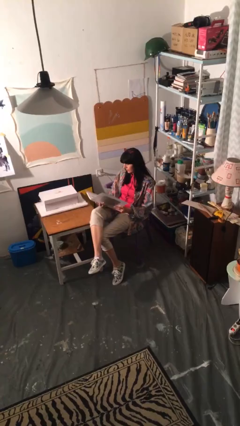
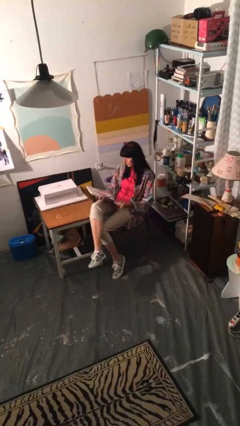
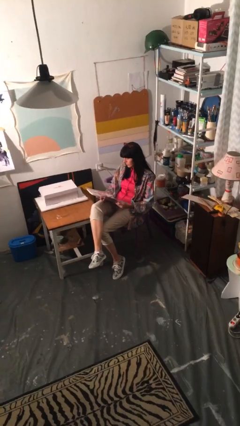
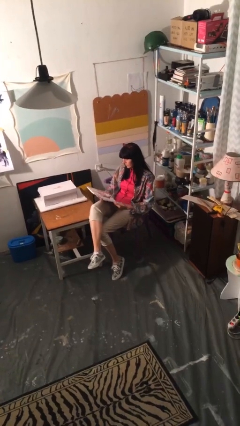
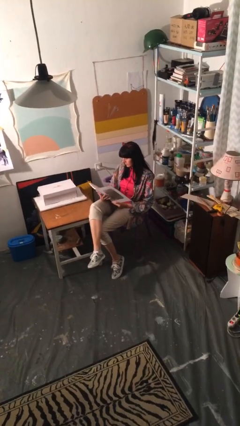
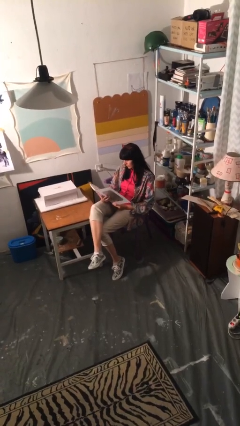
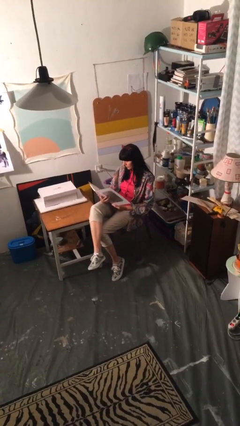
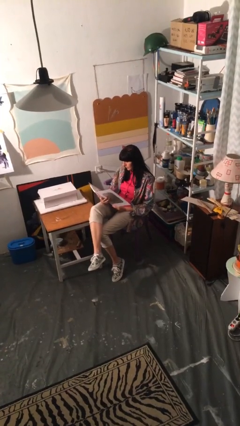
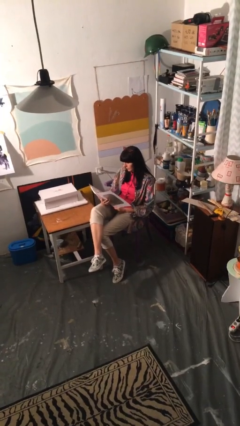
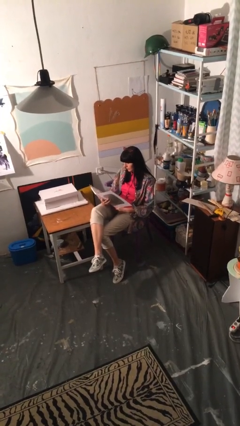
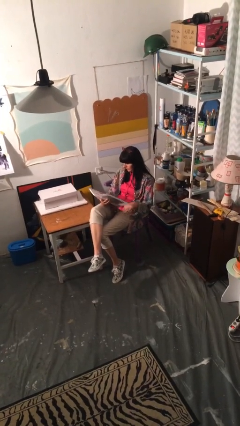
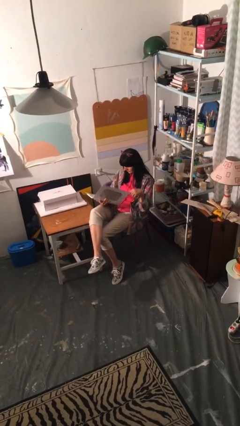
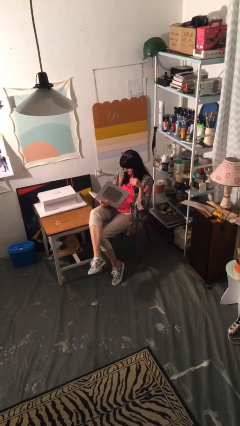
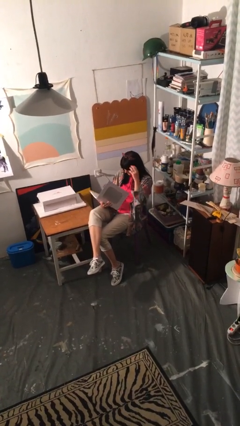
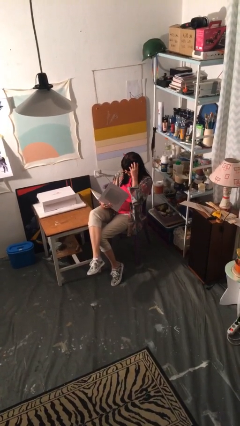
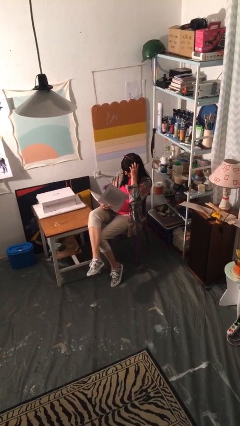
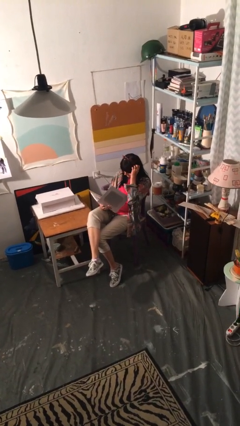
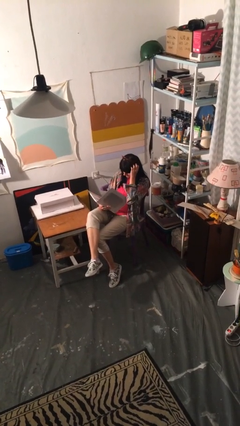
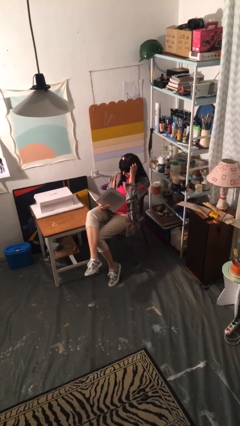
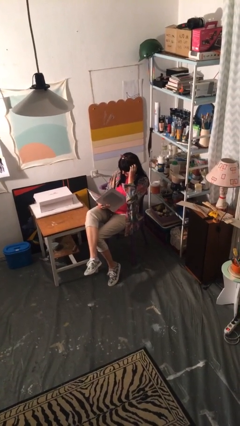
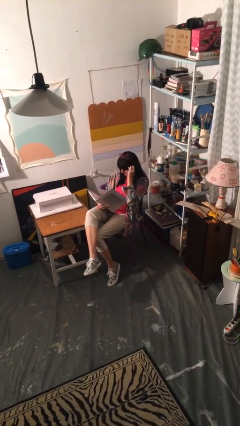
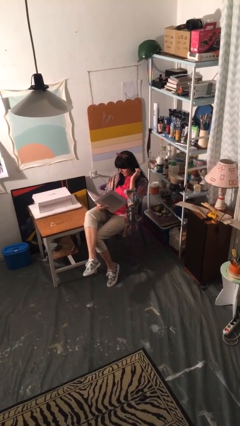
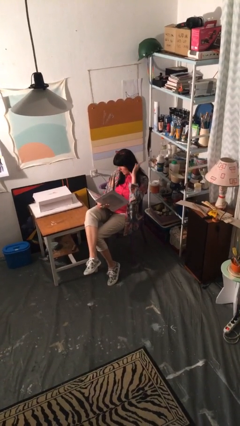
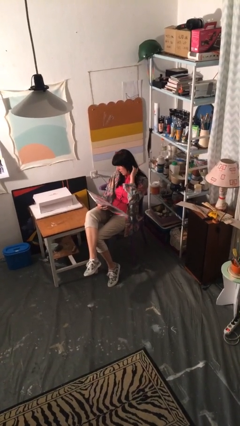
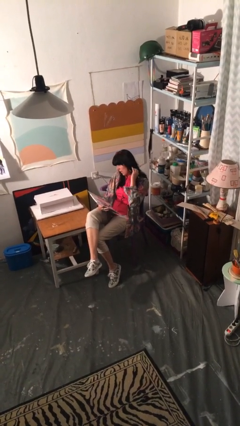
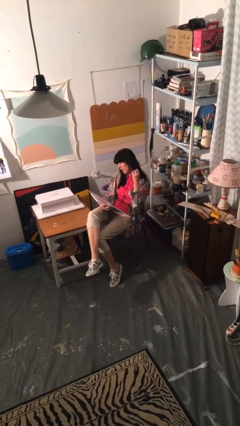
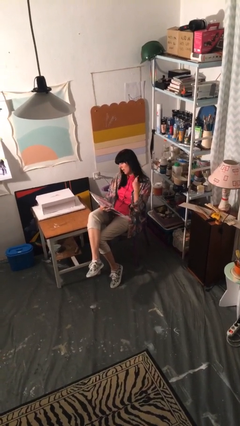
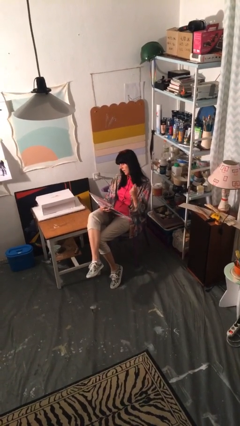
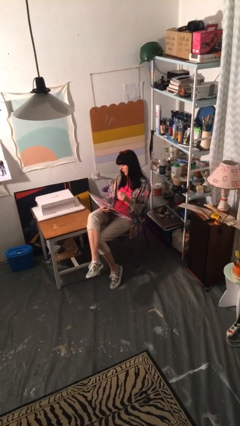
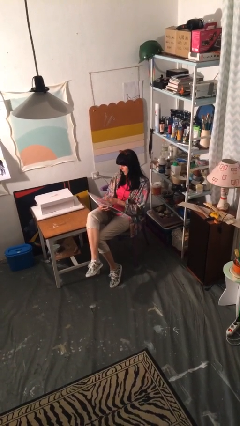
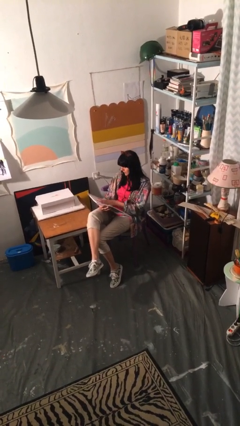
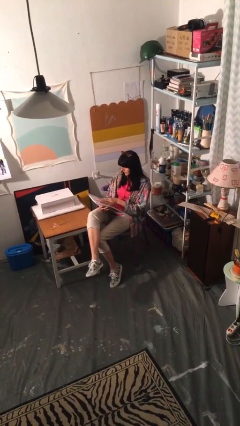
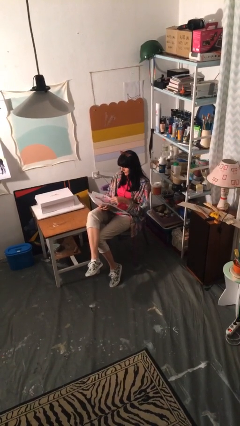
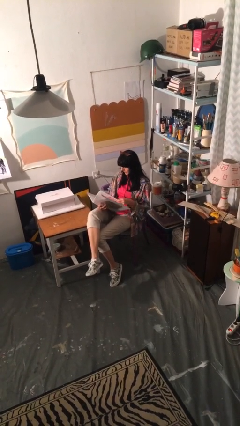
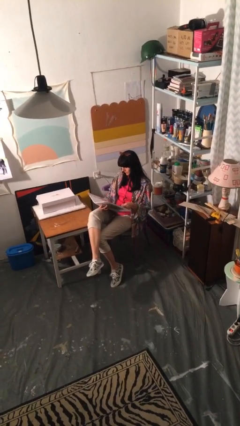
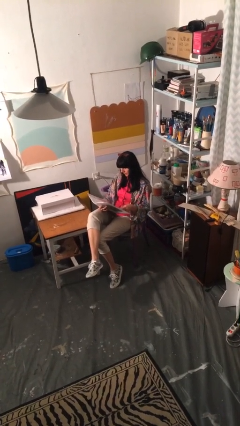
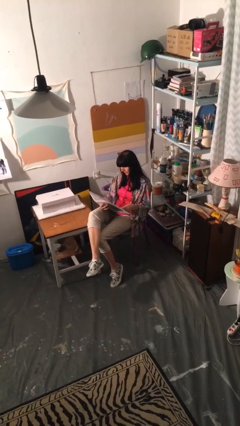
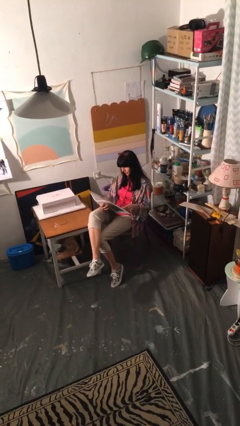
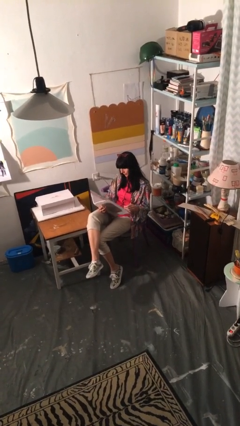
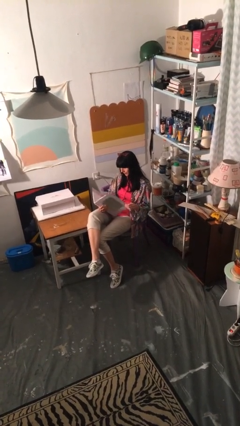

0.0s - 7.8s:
person reads document

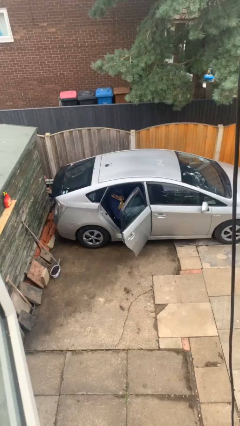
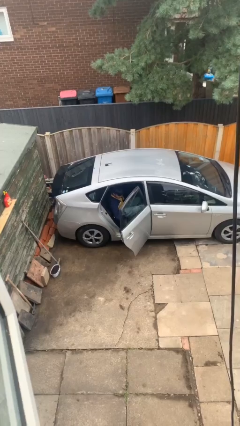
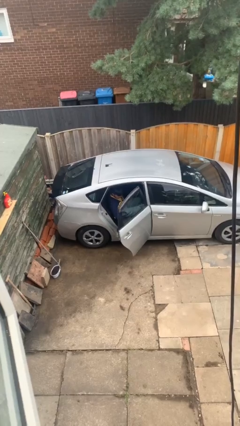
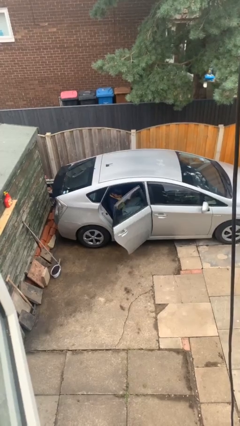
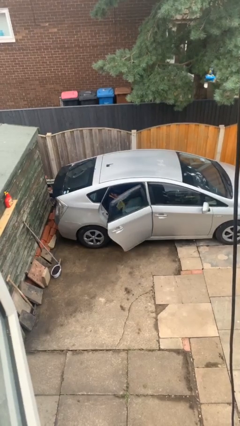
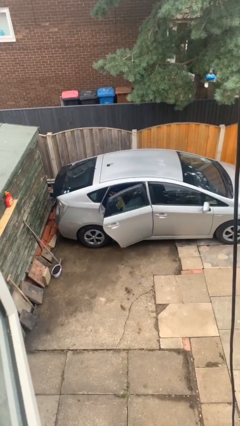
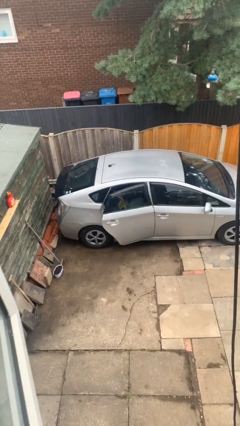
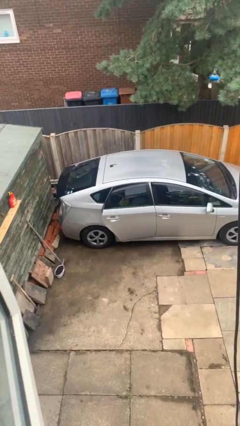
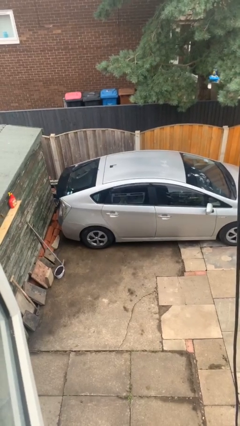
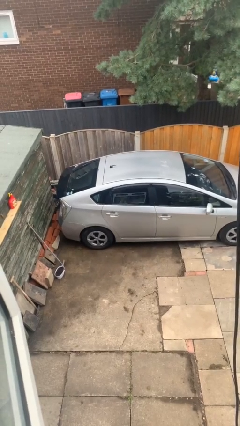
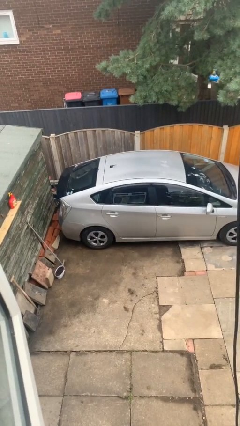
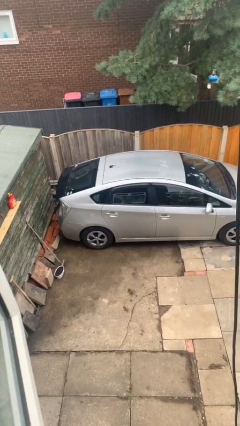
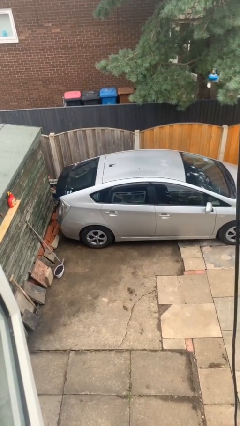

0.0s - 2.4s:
person closes car door

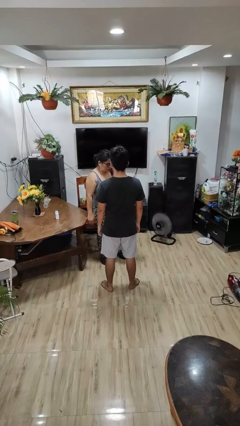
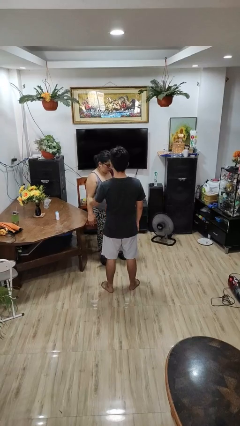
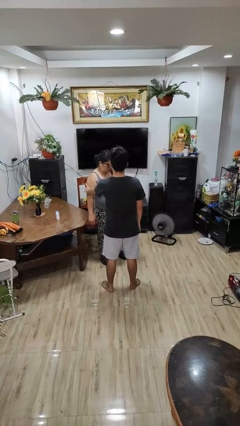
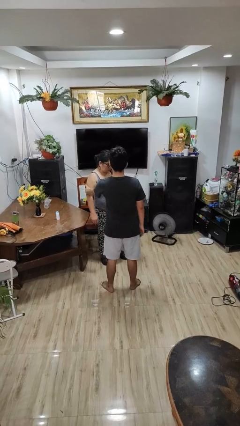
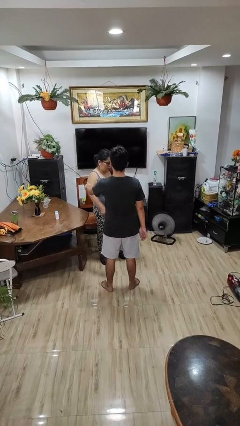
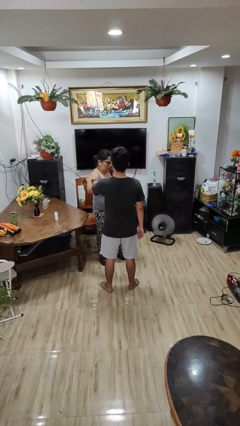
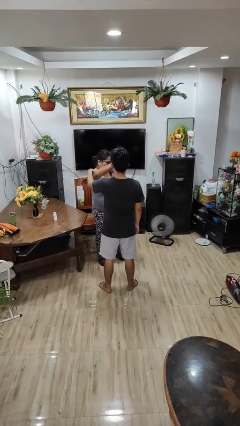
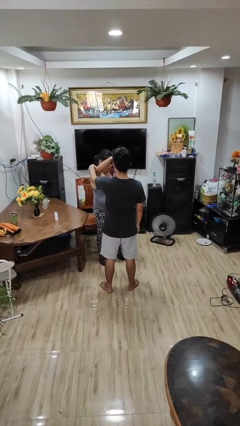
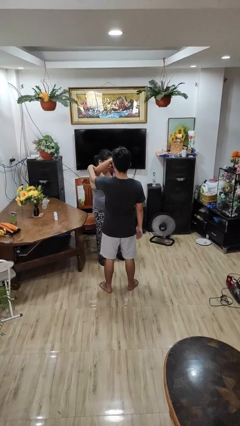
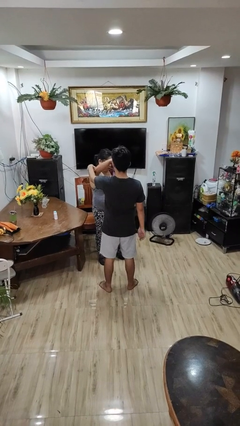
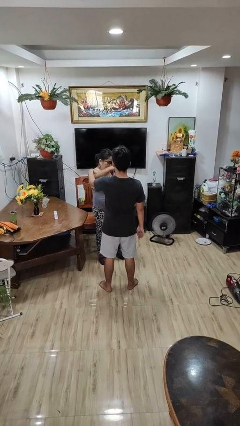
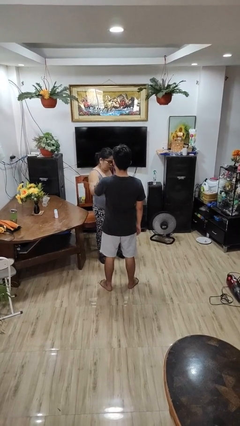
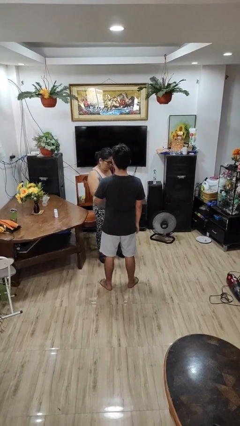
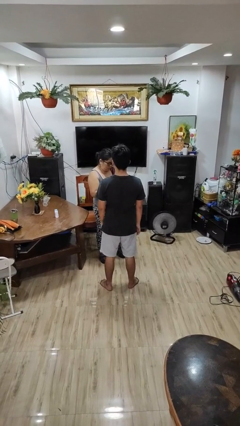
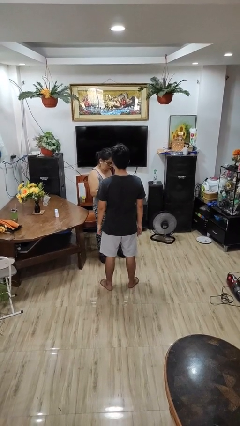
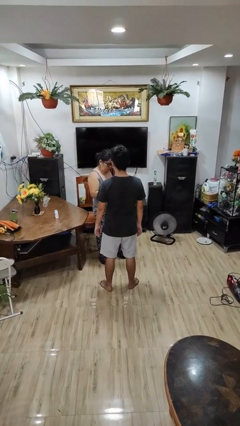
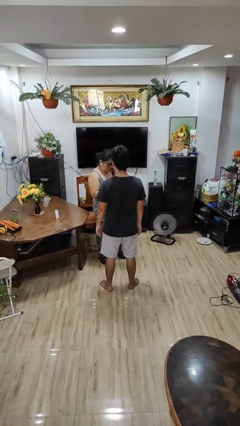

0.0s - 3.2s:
person grabs person by bicep

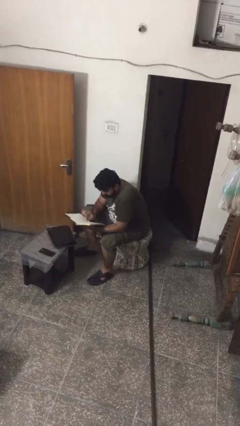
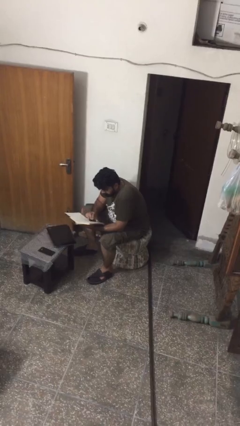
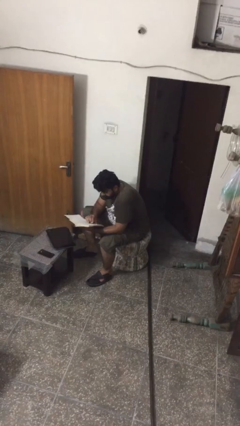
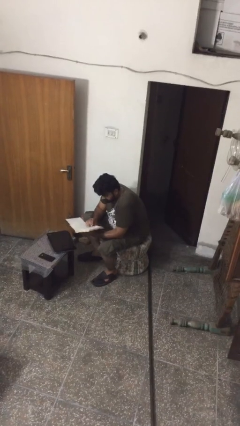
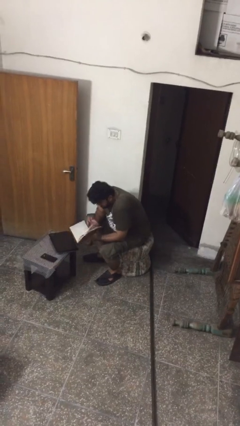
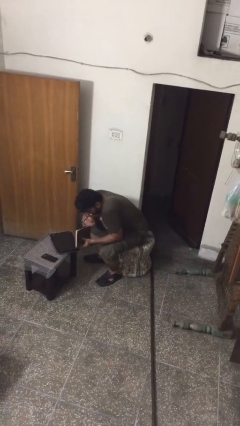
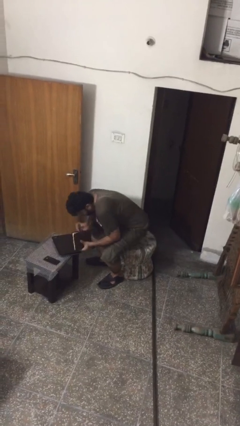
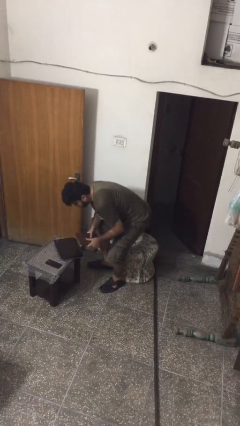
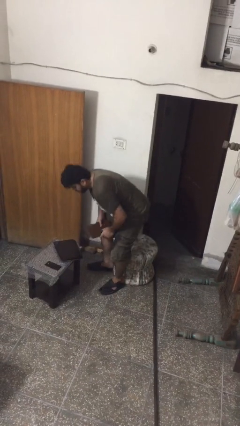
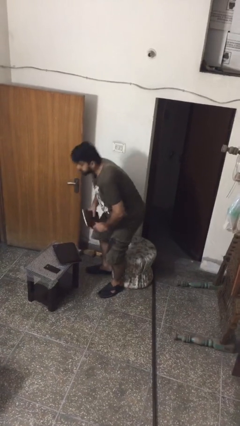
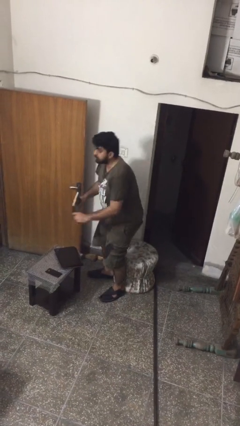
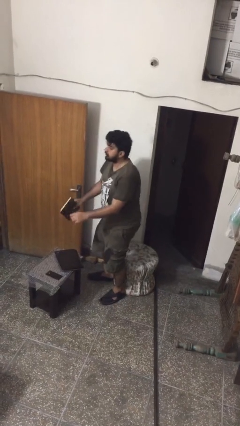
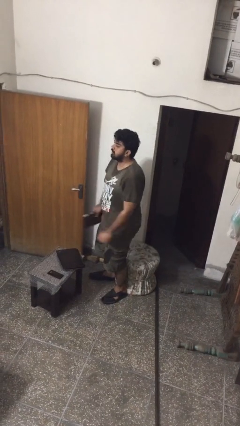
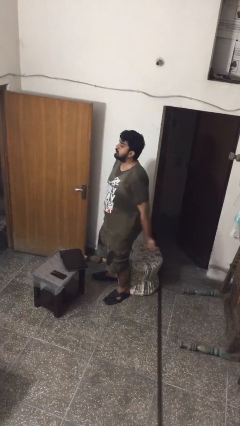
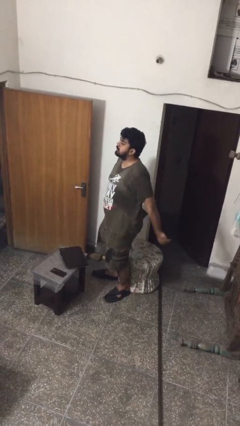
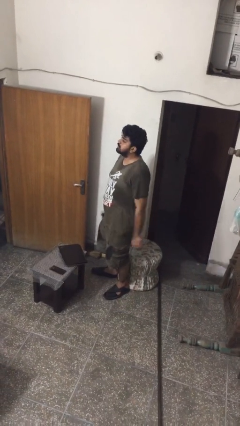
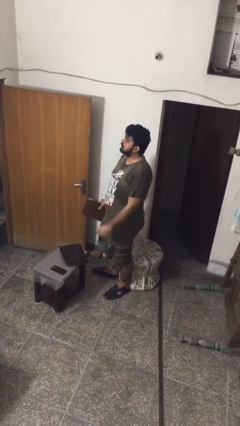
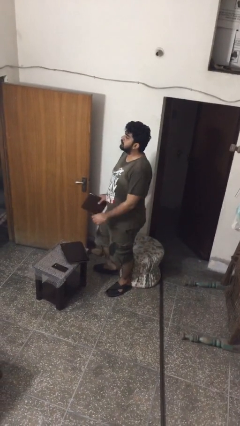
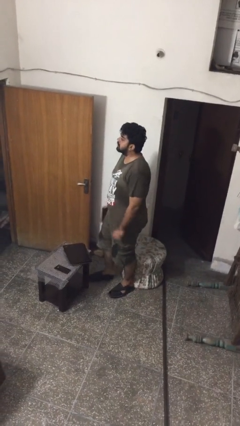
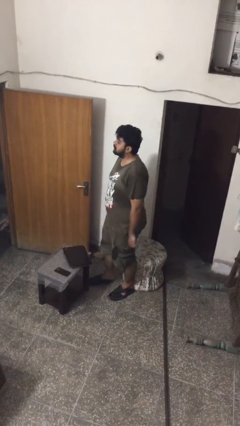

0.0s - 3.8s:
person stands up

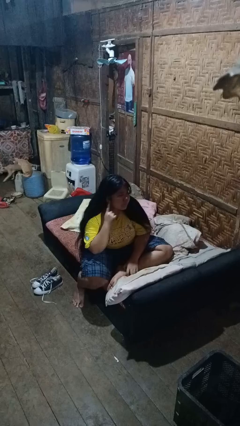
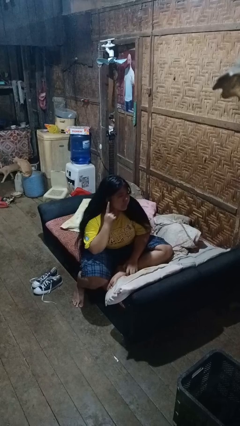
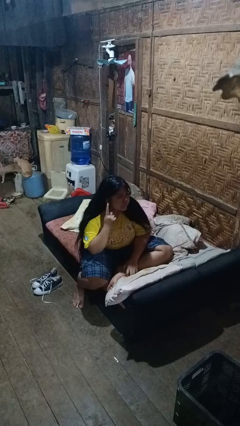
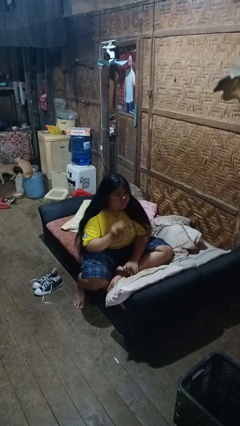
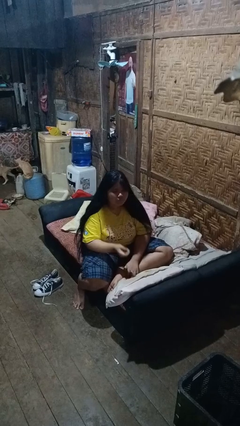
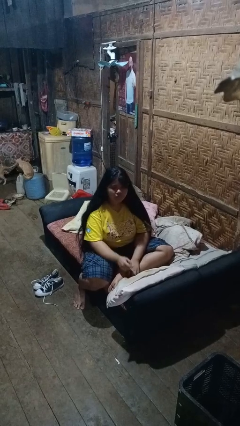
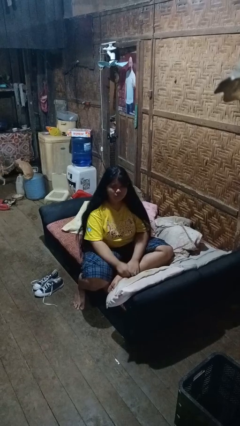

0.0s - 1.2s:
person gestures listen closely
